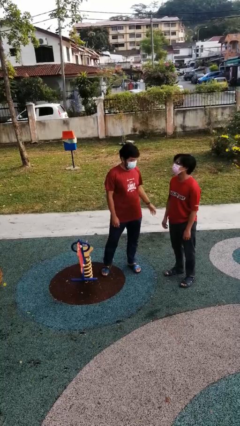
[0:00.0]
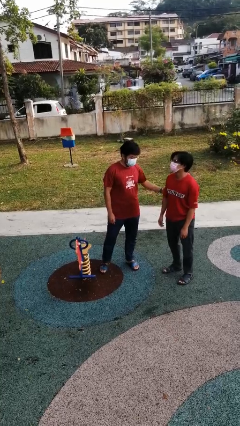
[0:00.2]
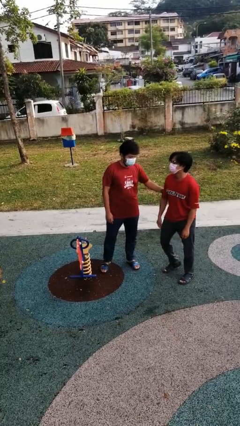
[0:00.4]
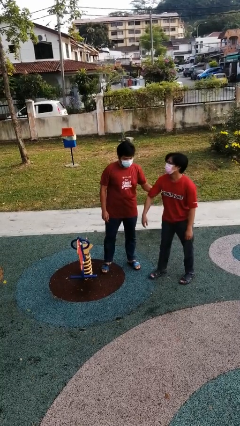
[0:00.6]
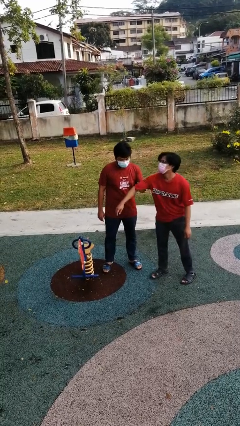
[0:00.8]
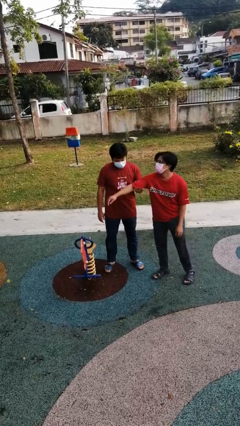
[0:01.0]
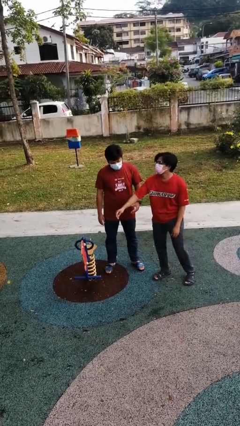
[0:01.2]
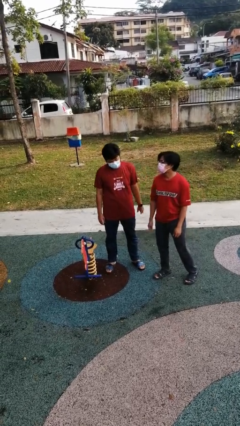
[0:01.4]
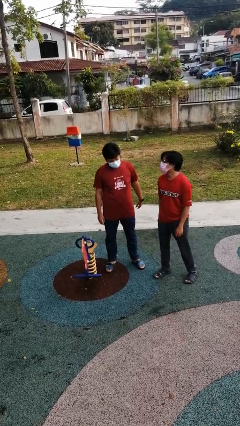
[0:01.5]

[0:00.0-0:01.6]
person grabs person by bicep

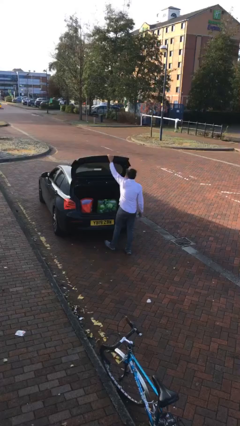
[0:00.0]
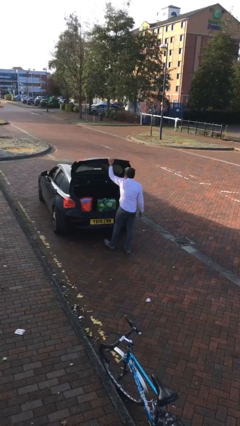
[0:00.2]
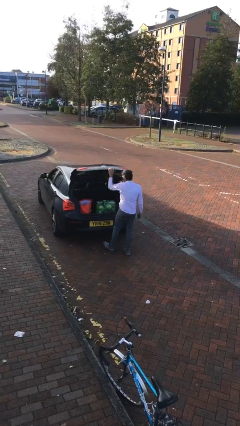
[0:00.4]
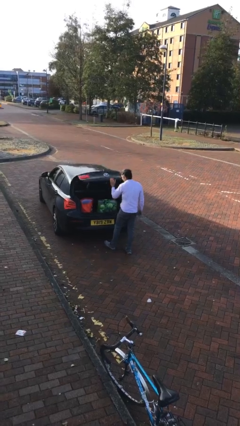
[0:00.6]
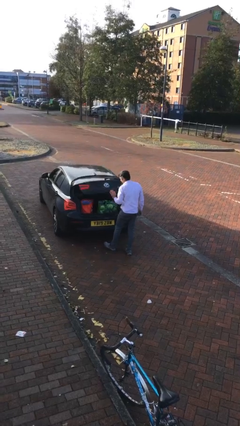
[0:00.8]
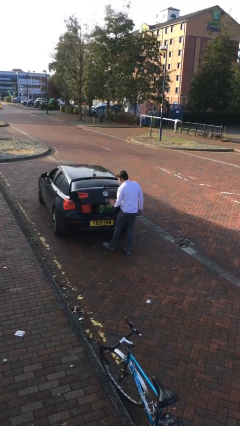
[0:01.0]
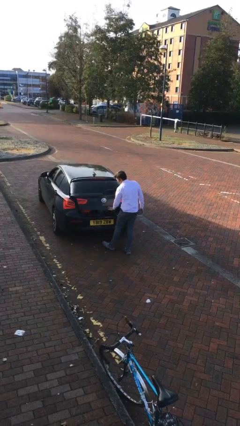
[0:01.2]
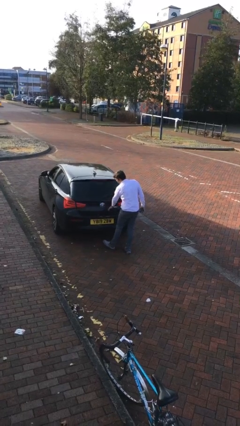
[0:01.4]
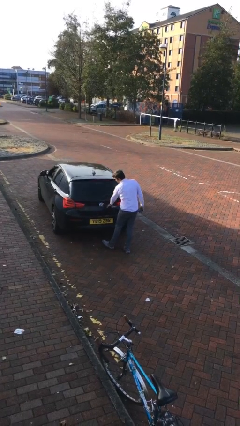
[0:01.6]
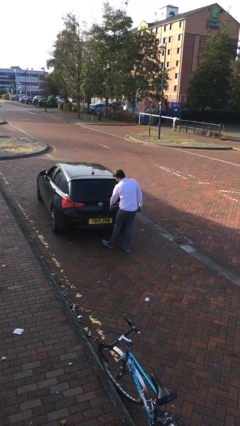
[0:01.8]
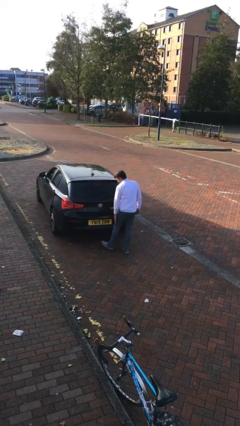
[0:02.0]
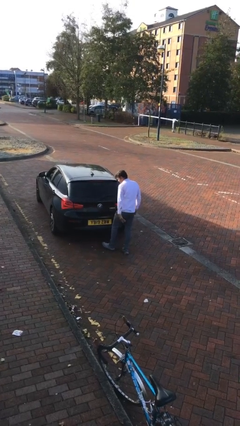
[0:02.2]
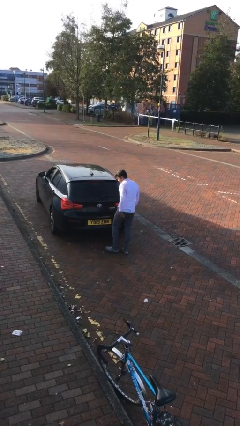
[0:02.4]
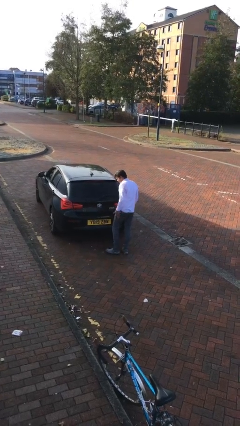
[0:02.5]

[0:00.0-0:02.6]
person closes car trunk

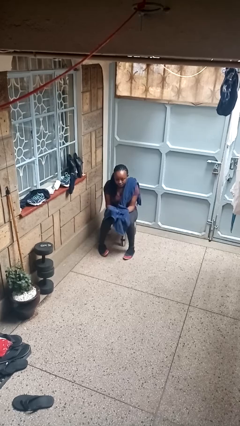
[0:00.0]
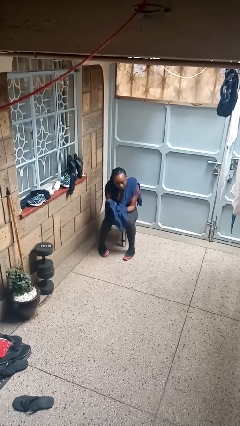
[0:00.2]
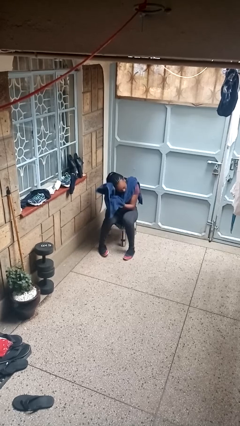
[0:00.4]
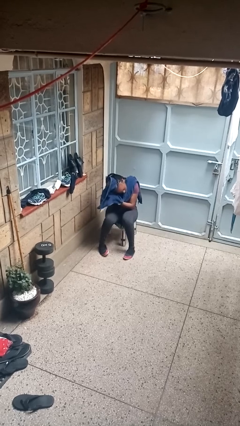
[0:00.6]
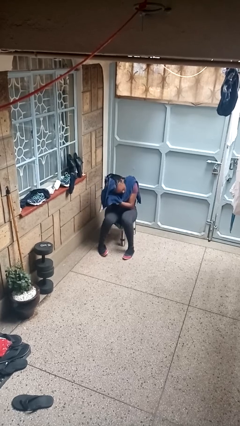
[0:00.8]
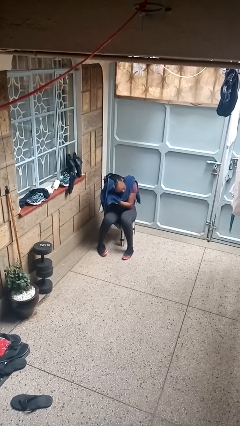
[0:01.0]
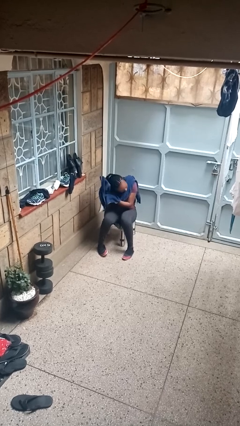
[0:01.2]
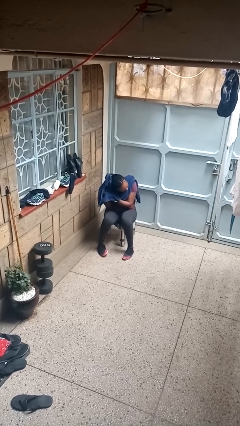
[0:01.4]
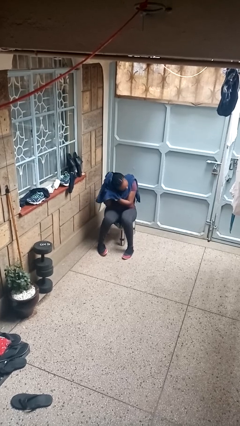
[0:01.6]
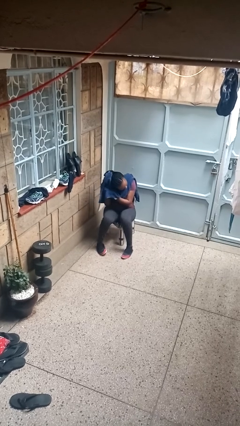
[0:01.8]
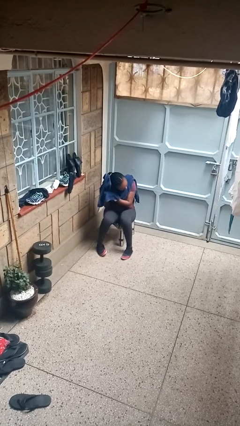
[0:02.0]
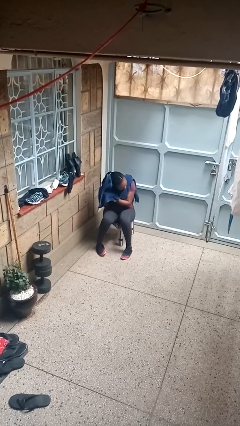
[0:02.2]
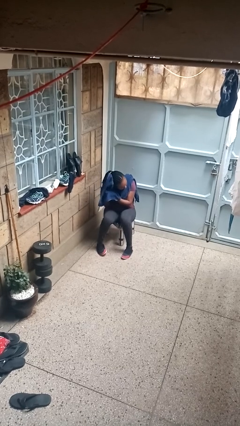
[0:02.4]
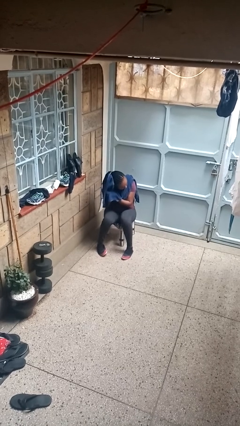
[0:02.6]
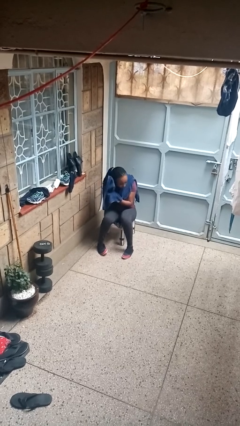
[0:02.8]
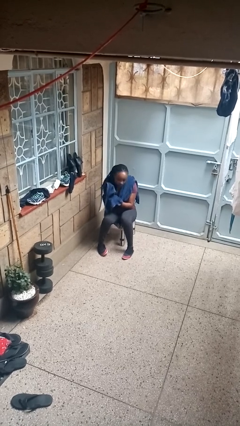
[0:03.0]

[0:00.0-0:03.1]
person dries hair with towel

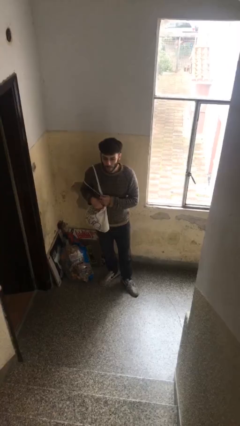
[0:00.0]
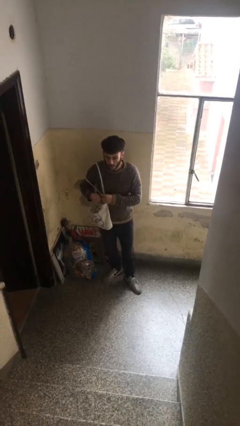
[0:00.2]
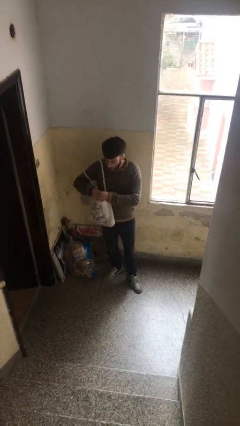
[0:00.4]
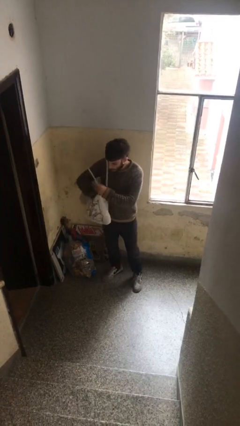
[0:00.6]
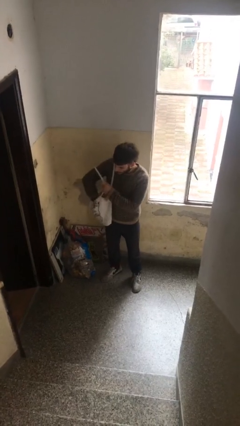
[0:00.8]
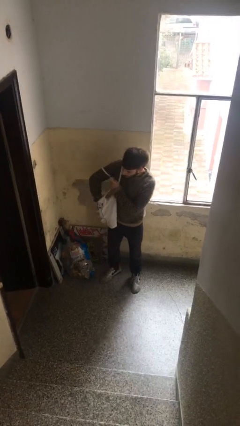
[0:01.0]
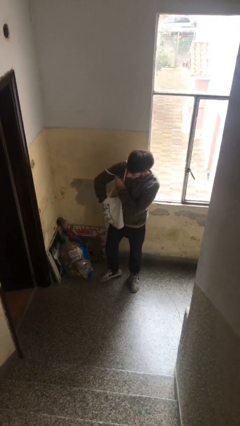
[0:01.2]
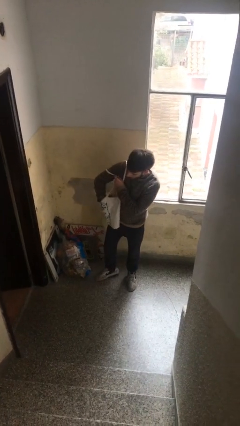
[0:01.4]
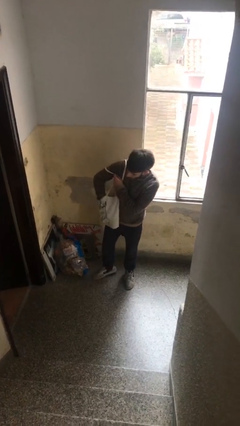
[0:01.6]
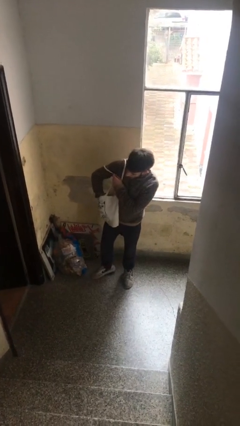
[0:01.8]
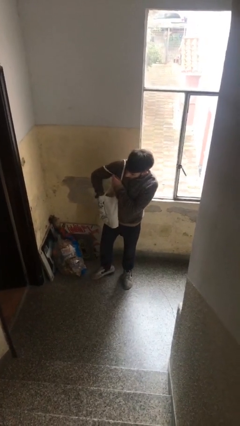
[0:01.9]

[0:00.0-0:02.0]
person searches in purse

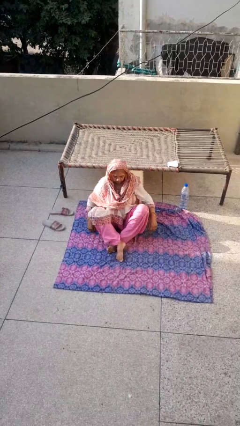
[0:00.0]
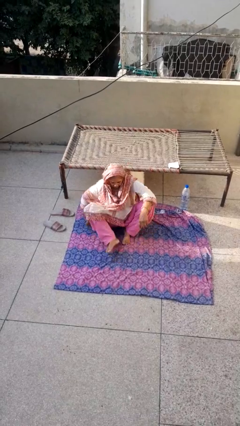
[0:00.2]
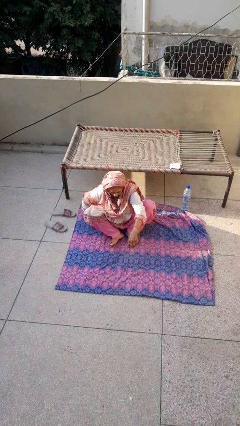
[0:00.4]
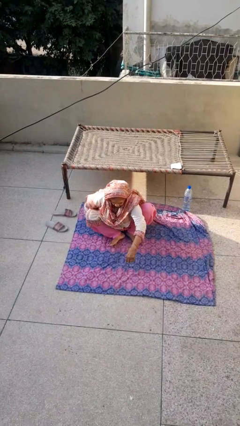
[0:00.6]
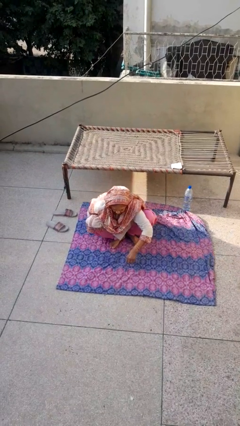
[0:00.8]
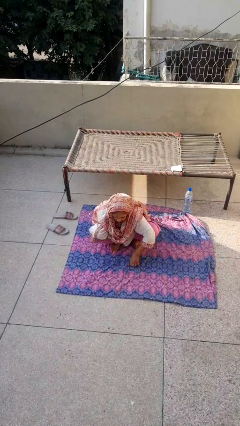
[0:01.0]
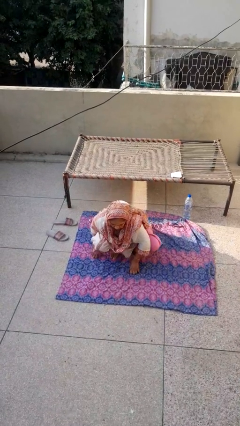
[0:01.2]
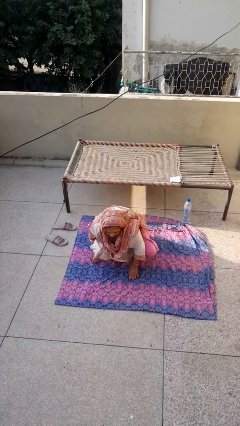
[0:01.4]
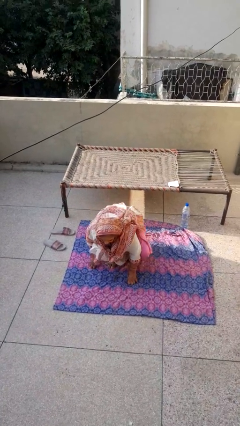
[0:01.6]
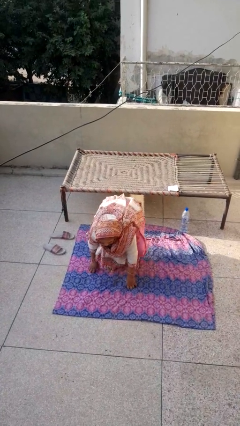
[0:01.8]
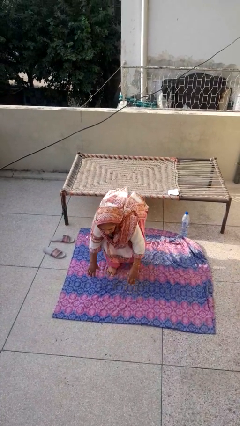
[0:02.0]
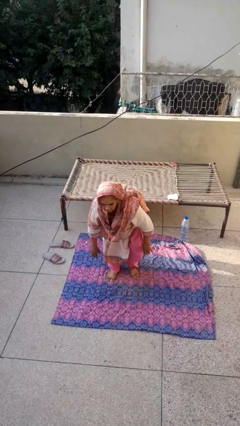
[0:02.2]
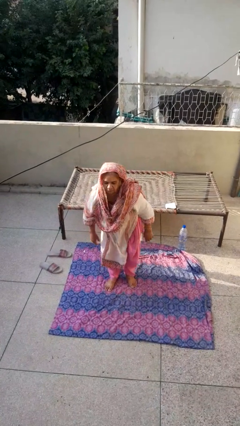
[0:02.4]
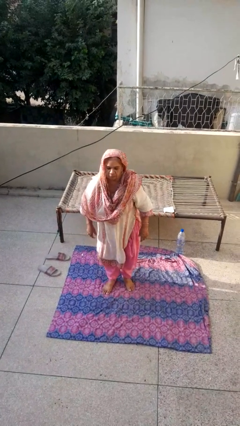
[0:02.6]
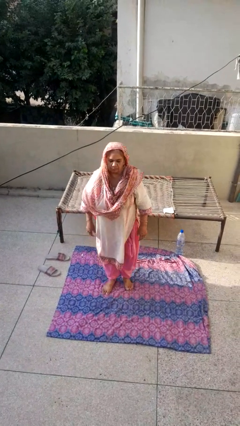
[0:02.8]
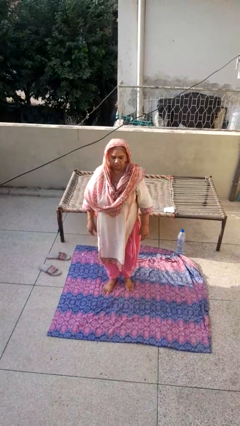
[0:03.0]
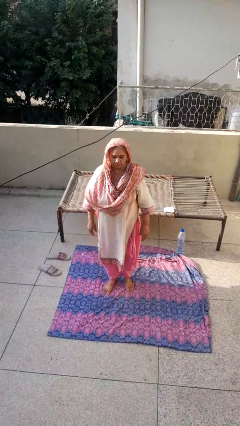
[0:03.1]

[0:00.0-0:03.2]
person stands up from floor

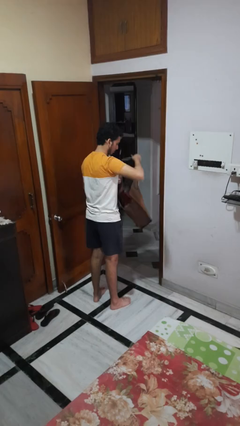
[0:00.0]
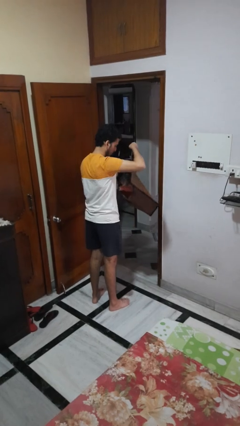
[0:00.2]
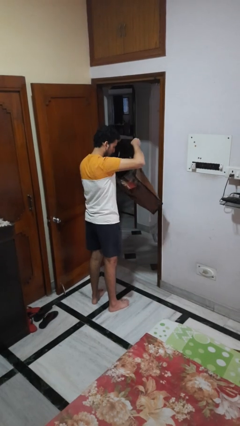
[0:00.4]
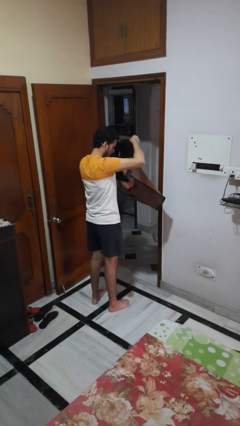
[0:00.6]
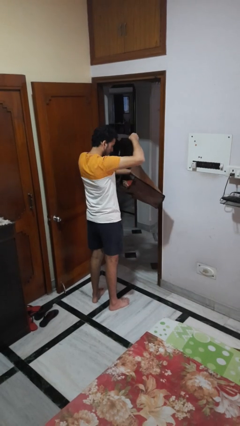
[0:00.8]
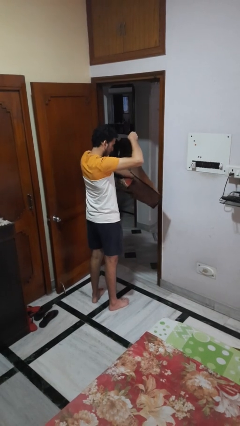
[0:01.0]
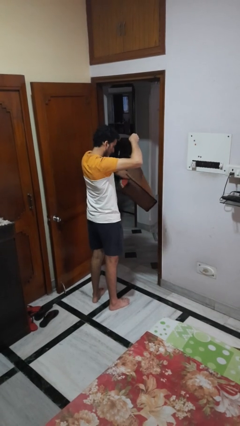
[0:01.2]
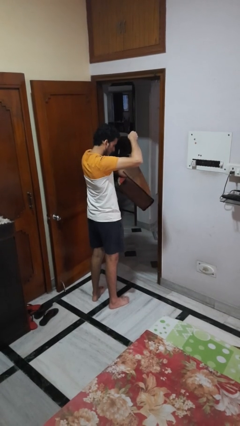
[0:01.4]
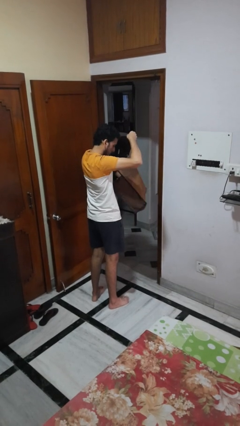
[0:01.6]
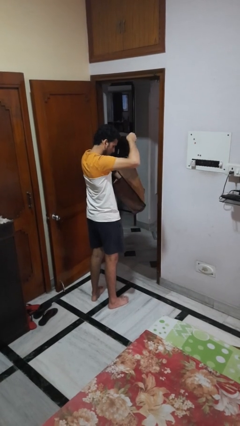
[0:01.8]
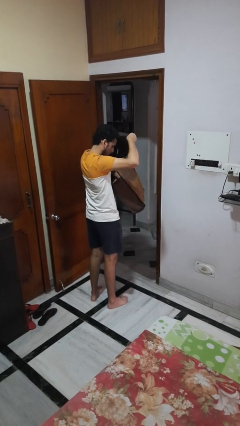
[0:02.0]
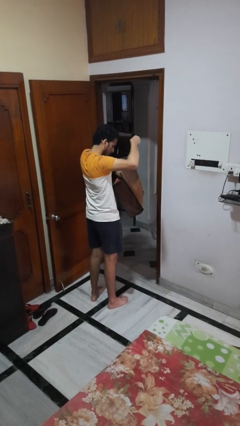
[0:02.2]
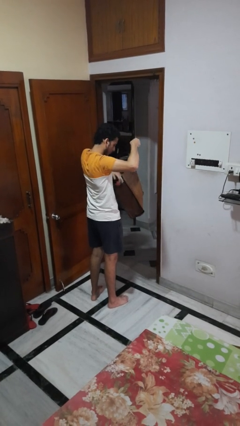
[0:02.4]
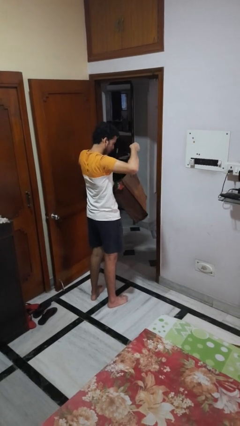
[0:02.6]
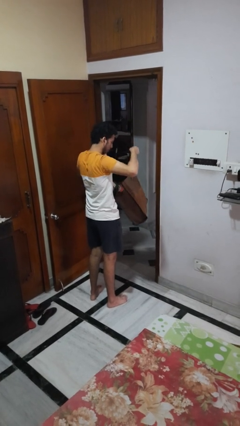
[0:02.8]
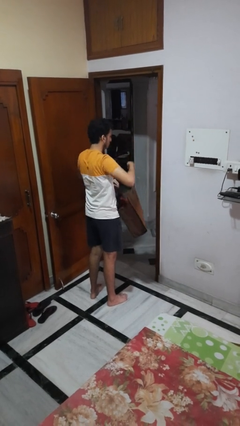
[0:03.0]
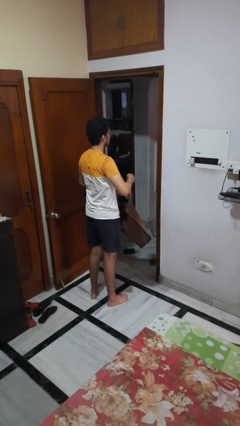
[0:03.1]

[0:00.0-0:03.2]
person searches in bag

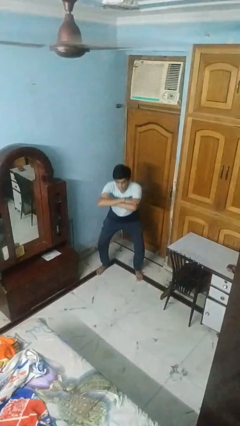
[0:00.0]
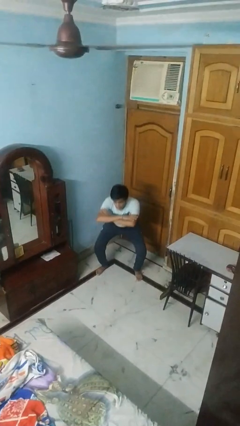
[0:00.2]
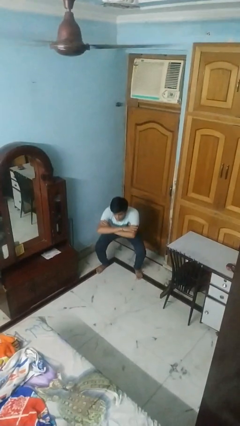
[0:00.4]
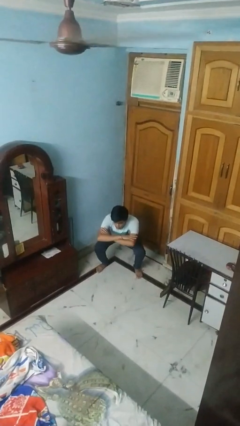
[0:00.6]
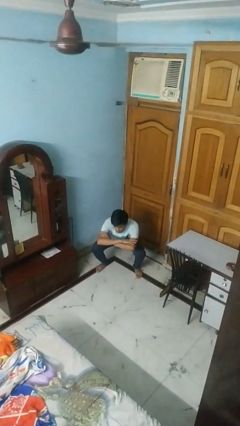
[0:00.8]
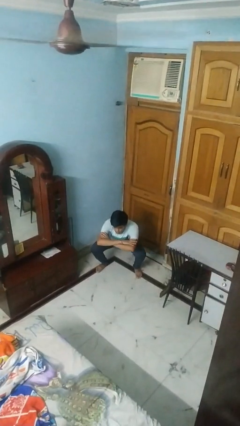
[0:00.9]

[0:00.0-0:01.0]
person squats

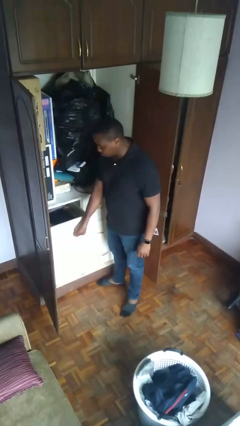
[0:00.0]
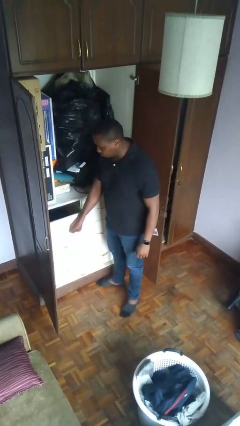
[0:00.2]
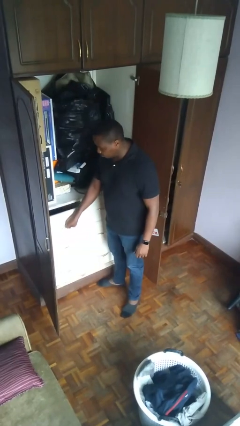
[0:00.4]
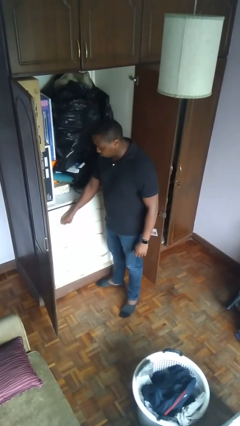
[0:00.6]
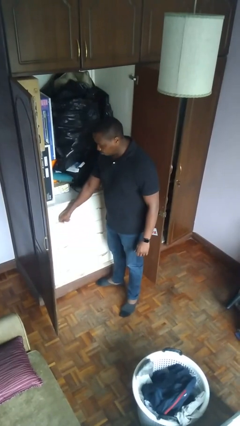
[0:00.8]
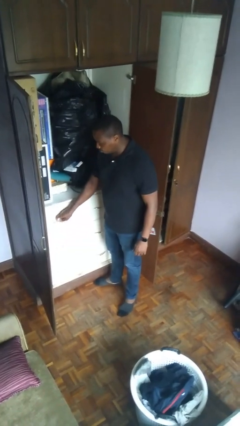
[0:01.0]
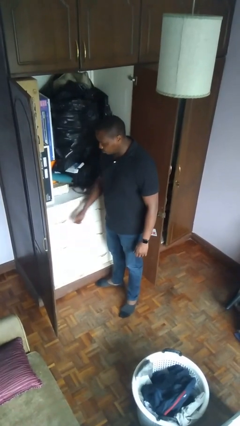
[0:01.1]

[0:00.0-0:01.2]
person closes dresser drawer
